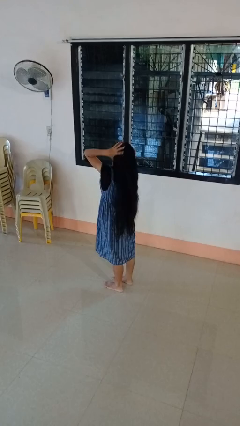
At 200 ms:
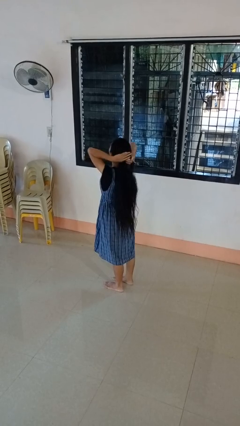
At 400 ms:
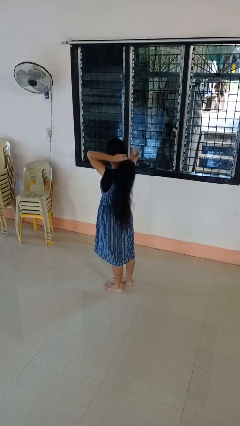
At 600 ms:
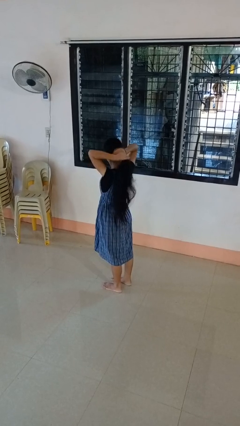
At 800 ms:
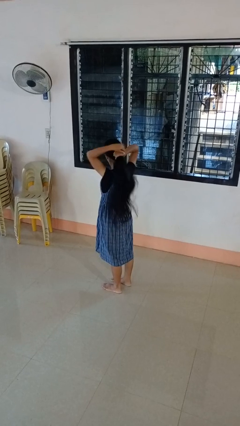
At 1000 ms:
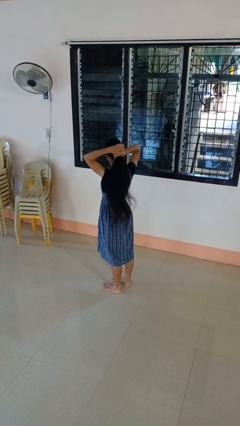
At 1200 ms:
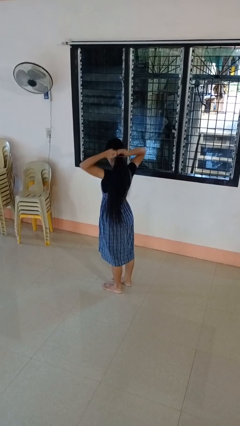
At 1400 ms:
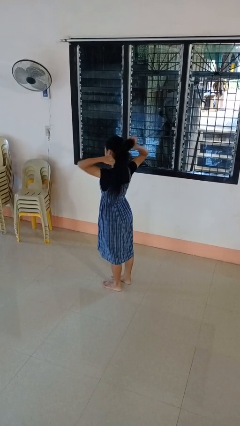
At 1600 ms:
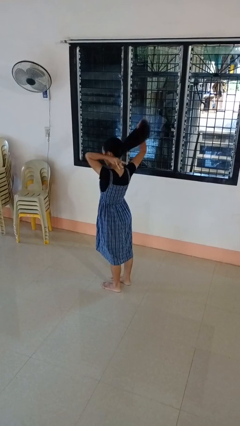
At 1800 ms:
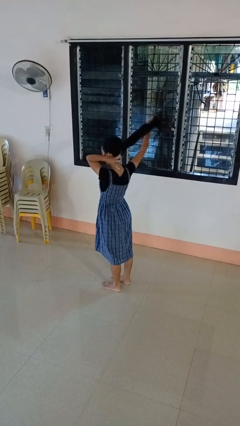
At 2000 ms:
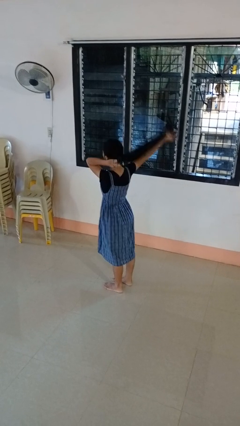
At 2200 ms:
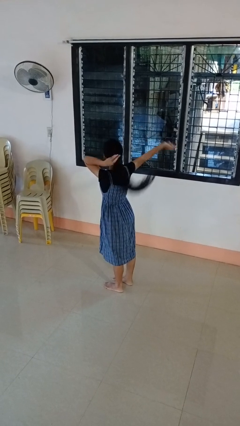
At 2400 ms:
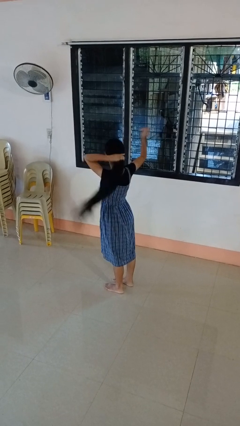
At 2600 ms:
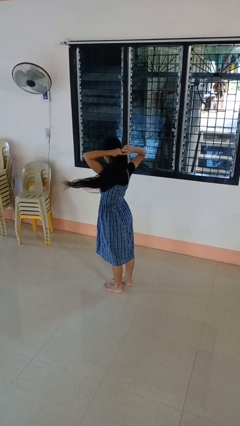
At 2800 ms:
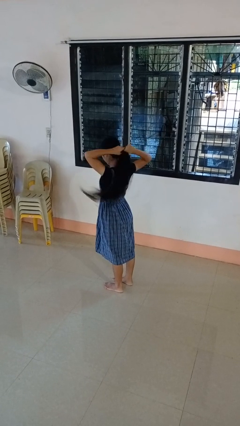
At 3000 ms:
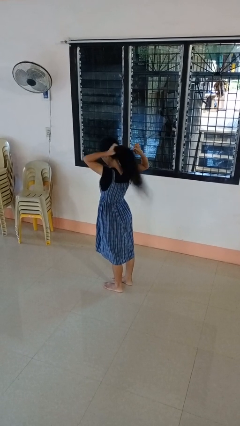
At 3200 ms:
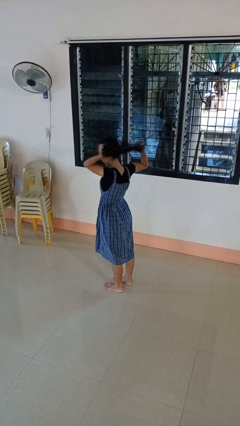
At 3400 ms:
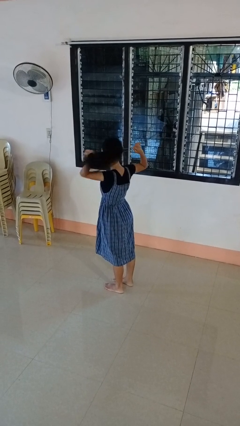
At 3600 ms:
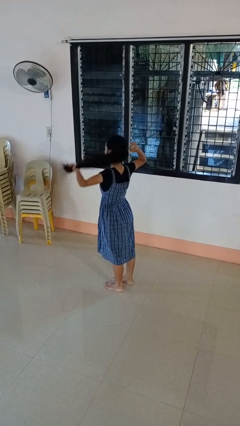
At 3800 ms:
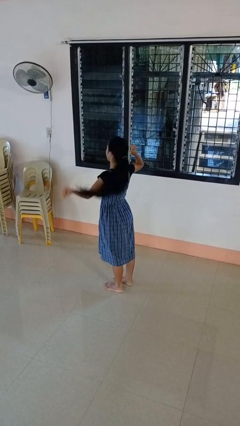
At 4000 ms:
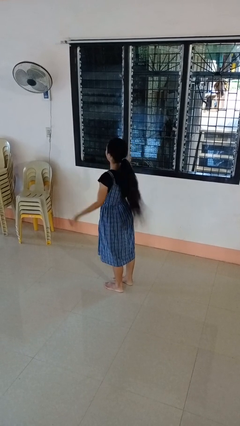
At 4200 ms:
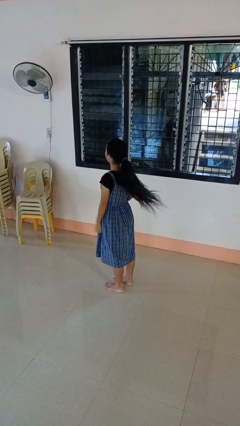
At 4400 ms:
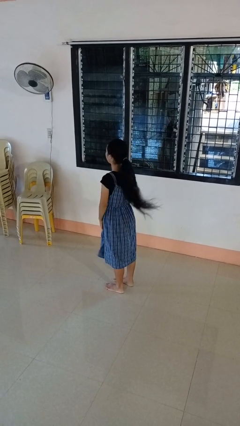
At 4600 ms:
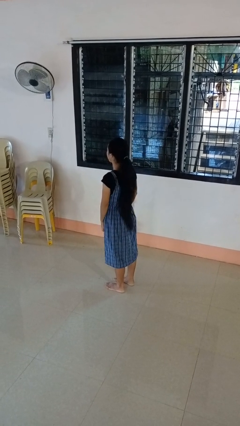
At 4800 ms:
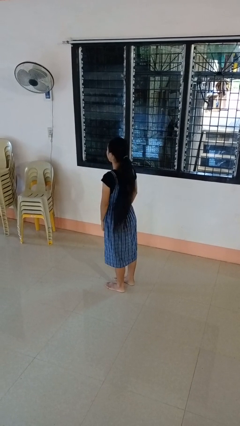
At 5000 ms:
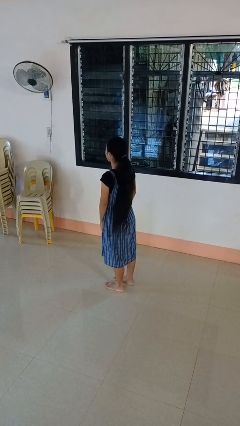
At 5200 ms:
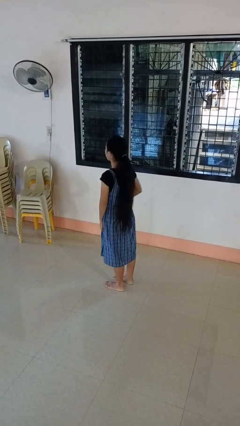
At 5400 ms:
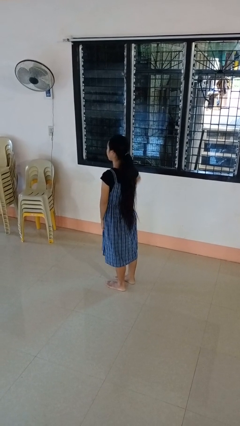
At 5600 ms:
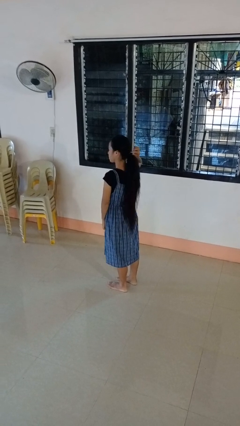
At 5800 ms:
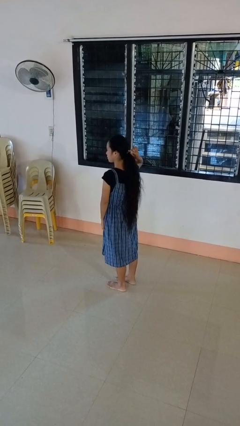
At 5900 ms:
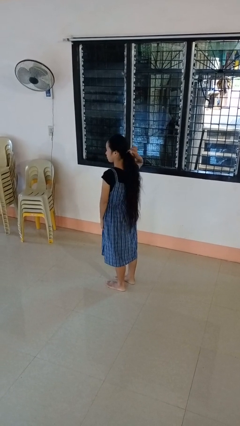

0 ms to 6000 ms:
person puts hair in ponytail

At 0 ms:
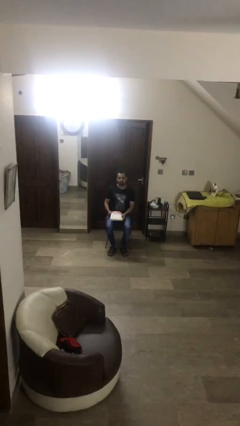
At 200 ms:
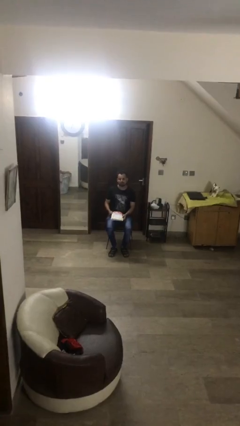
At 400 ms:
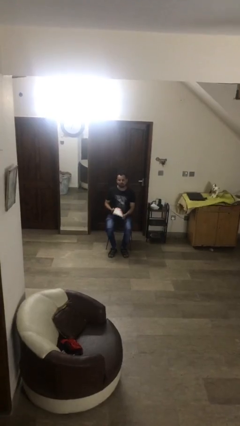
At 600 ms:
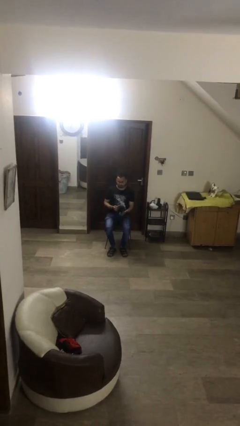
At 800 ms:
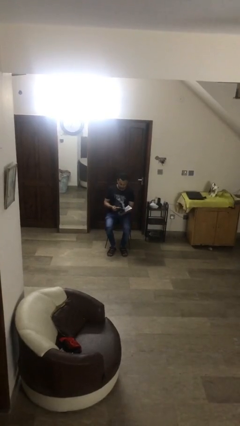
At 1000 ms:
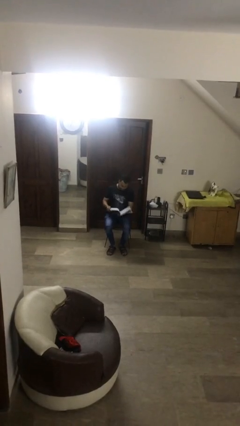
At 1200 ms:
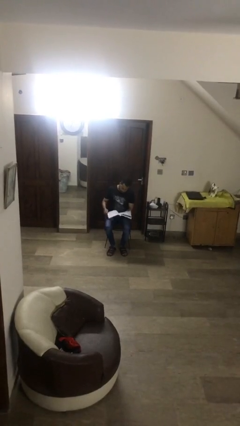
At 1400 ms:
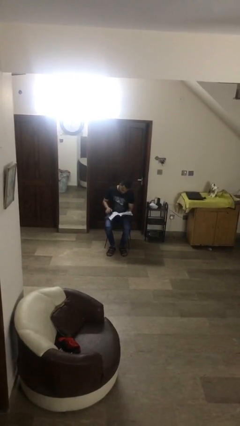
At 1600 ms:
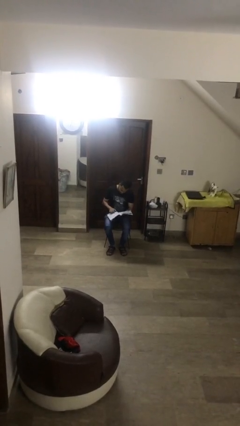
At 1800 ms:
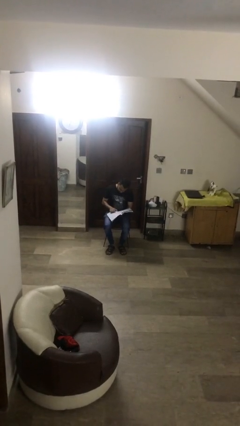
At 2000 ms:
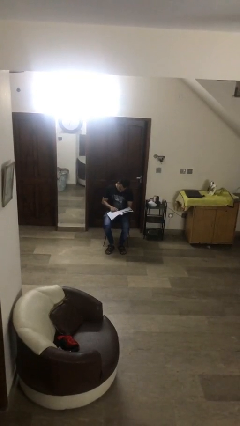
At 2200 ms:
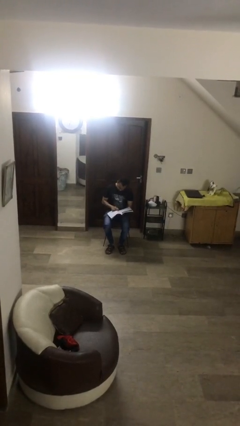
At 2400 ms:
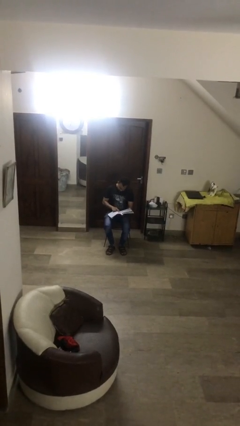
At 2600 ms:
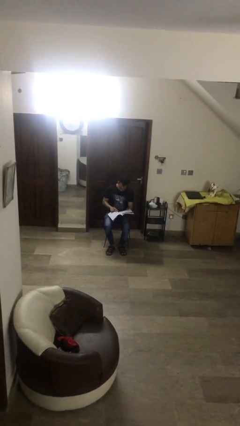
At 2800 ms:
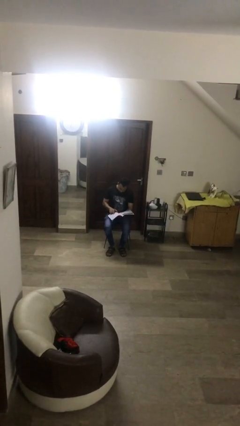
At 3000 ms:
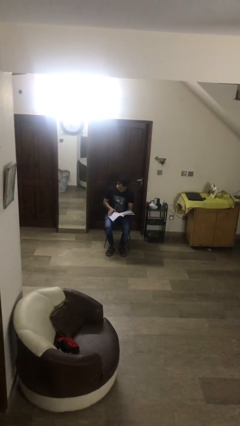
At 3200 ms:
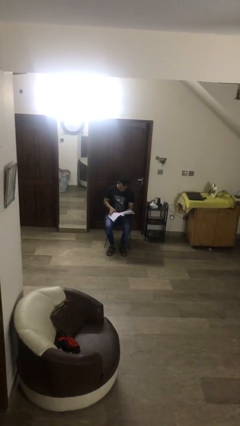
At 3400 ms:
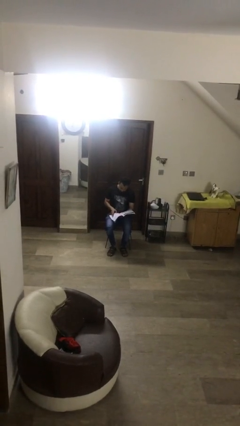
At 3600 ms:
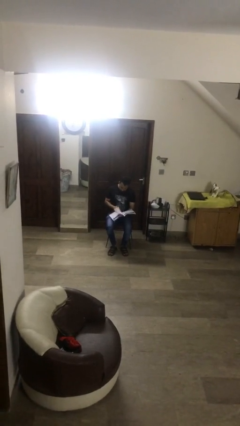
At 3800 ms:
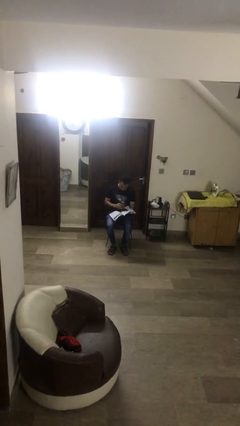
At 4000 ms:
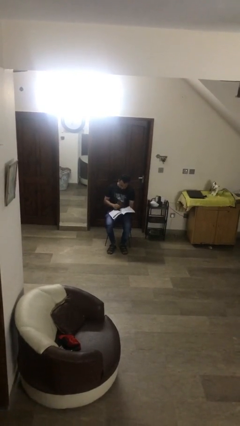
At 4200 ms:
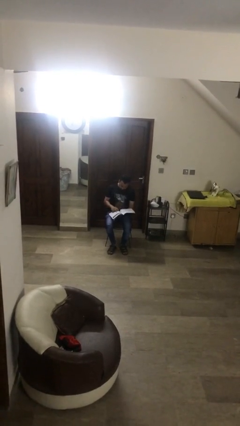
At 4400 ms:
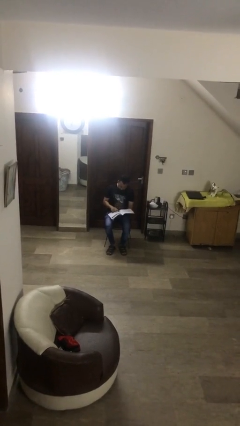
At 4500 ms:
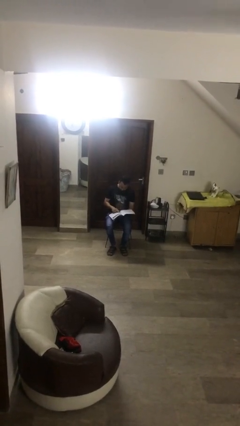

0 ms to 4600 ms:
person reads document

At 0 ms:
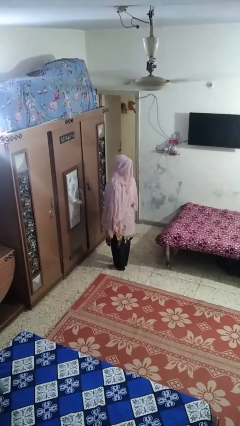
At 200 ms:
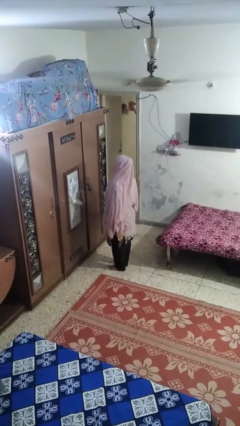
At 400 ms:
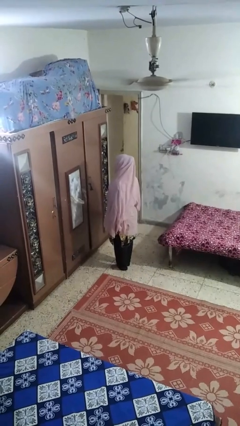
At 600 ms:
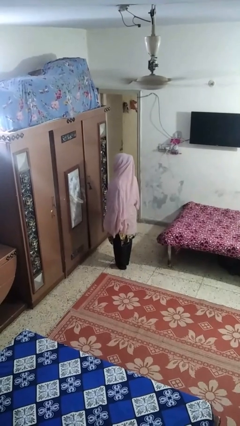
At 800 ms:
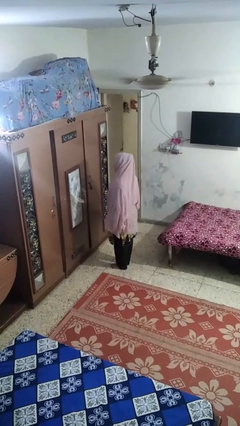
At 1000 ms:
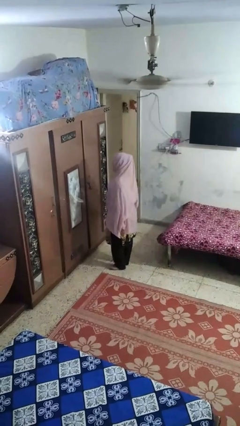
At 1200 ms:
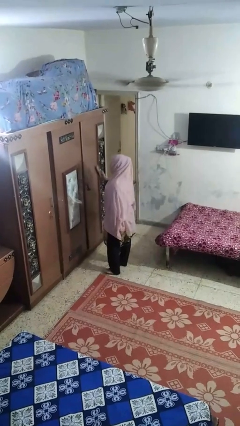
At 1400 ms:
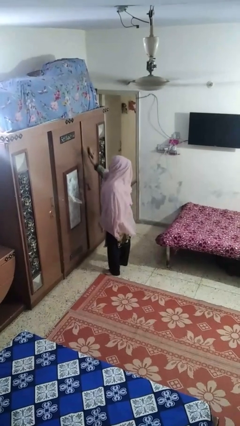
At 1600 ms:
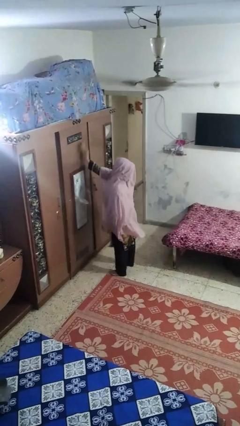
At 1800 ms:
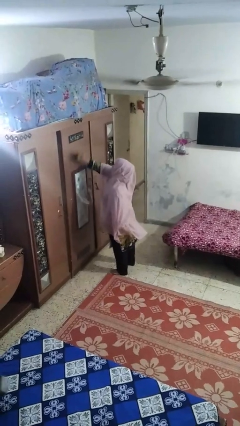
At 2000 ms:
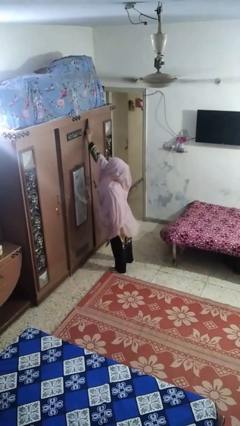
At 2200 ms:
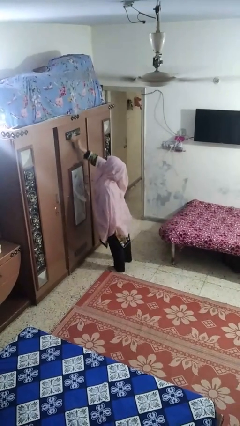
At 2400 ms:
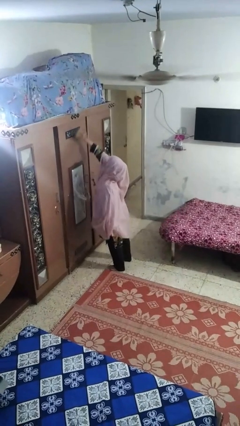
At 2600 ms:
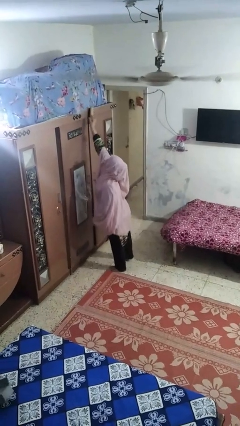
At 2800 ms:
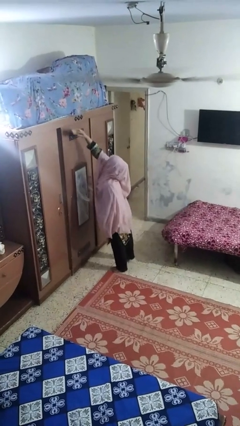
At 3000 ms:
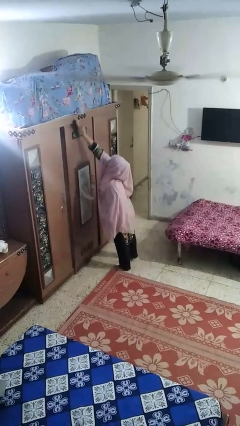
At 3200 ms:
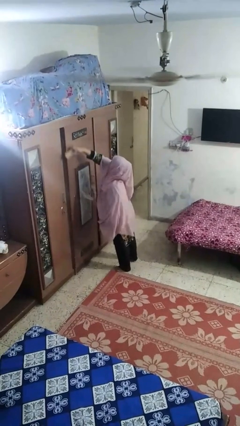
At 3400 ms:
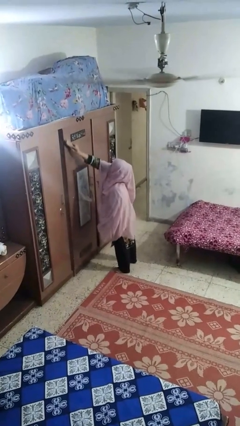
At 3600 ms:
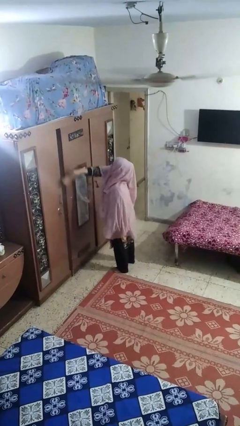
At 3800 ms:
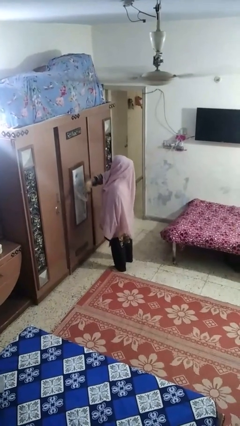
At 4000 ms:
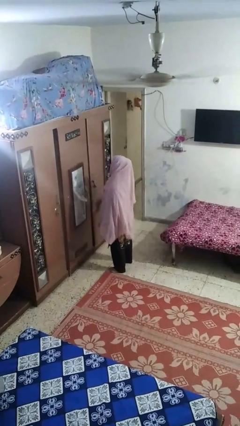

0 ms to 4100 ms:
person dusts furniture

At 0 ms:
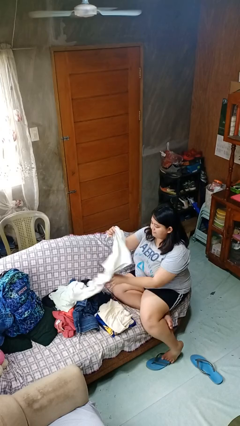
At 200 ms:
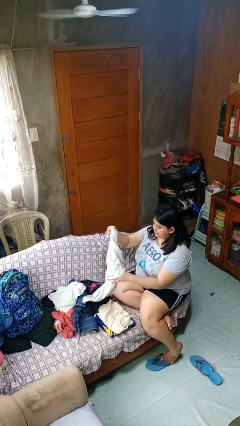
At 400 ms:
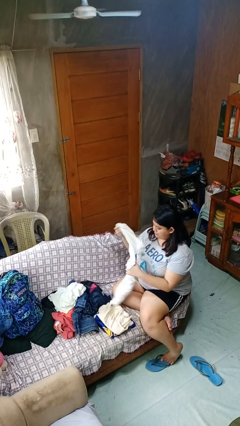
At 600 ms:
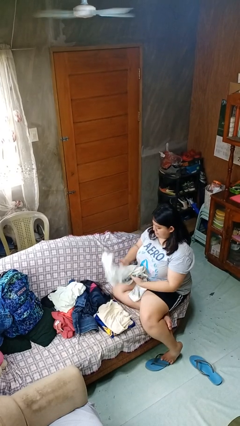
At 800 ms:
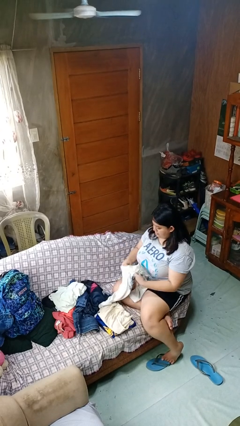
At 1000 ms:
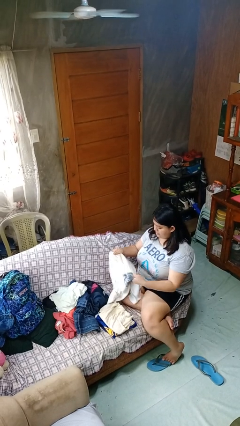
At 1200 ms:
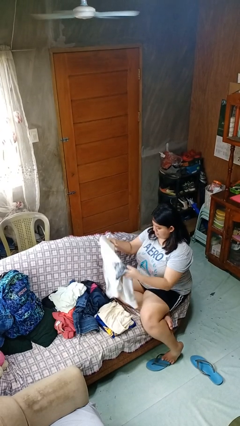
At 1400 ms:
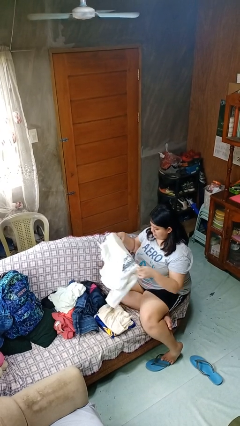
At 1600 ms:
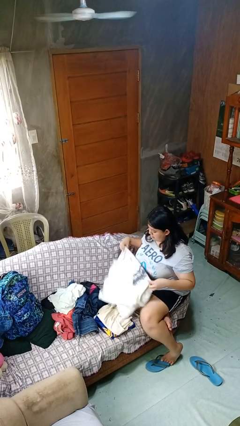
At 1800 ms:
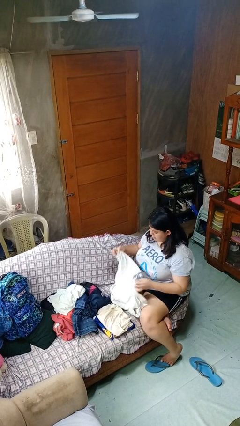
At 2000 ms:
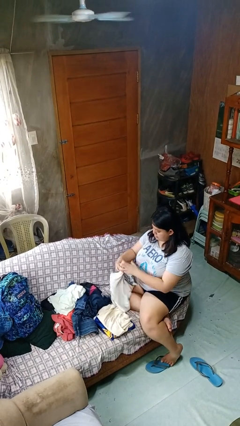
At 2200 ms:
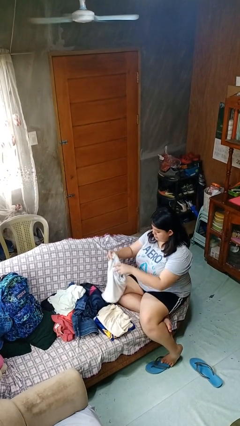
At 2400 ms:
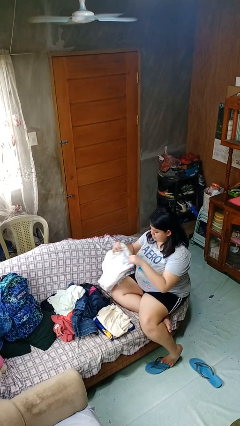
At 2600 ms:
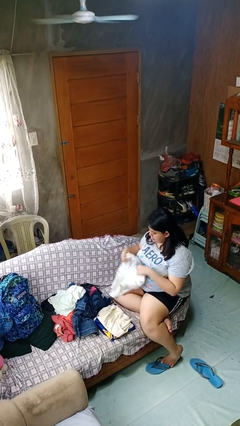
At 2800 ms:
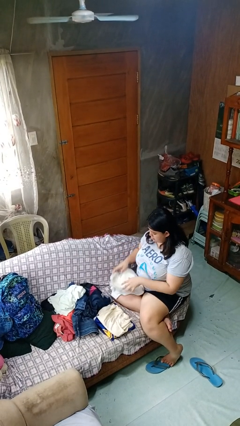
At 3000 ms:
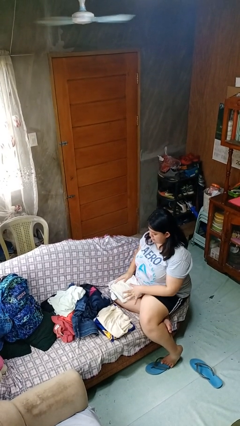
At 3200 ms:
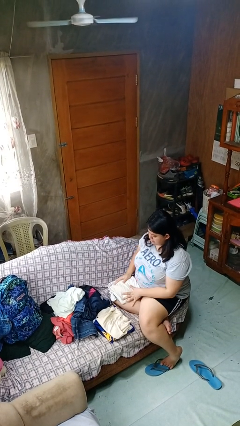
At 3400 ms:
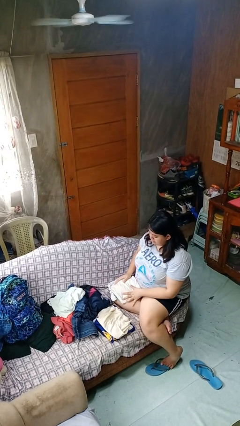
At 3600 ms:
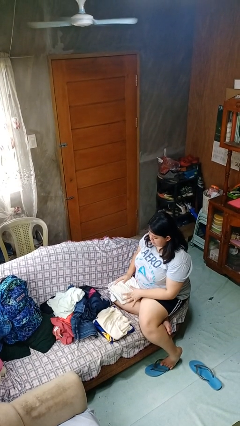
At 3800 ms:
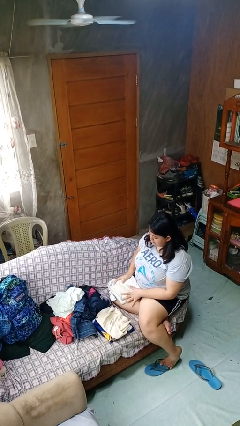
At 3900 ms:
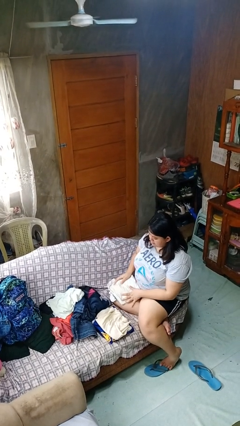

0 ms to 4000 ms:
person folds shirt
